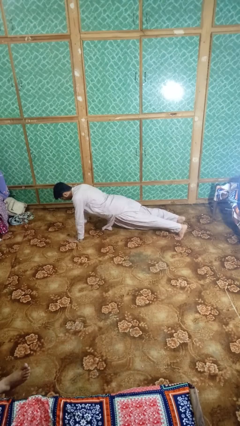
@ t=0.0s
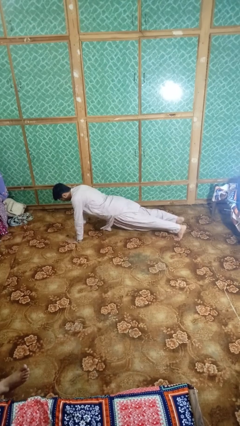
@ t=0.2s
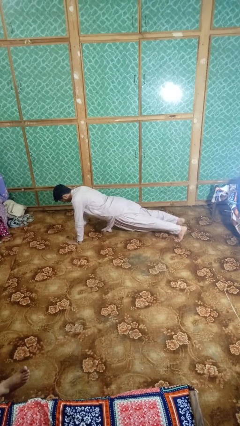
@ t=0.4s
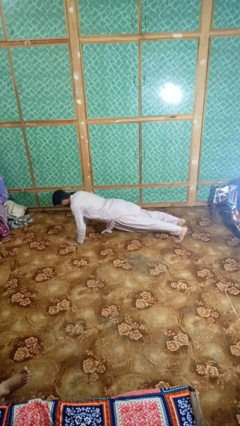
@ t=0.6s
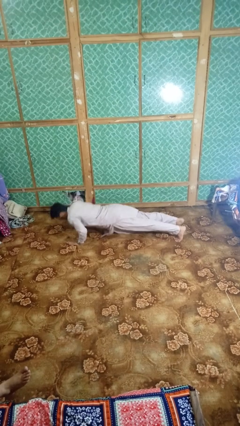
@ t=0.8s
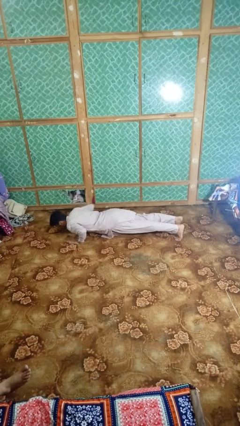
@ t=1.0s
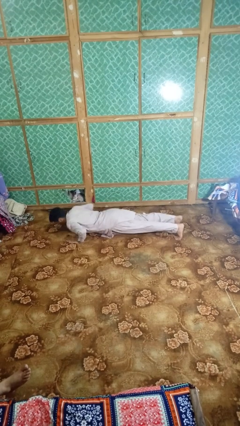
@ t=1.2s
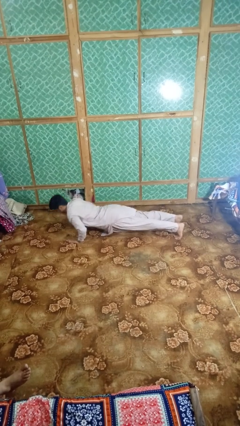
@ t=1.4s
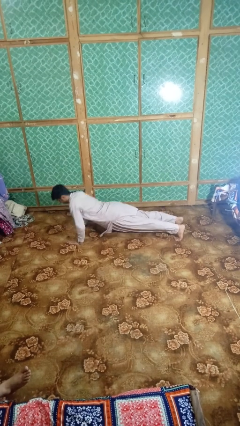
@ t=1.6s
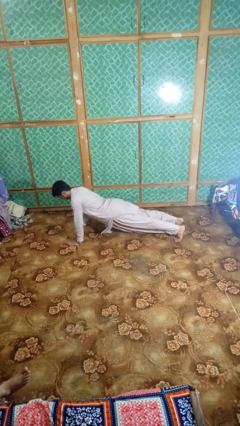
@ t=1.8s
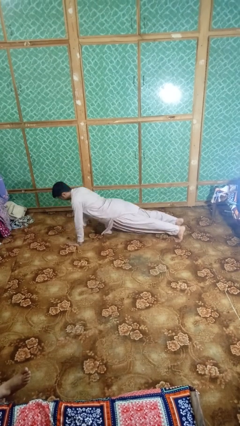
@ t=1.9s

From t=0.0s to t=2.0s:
person exercises with pushup

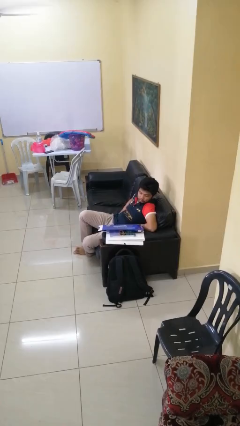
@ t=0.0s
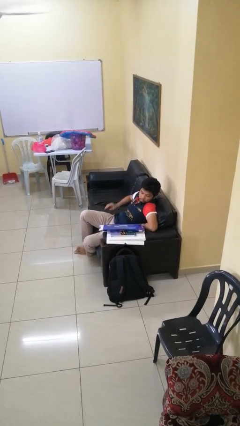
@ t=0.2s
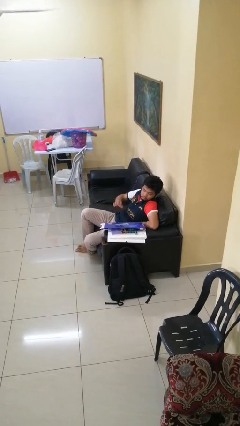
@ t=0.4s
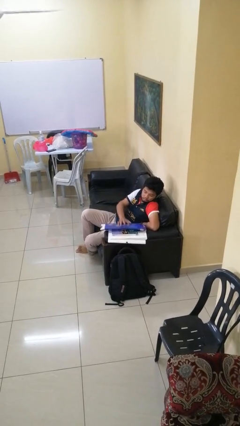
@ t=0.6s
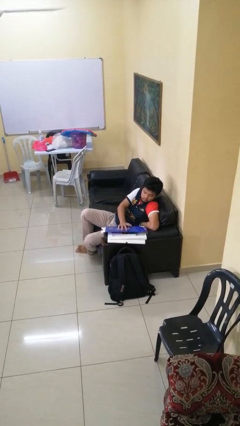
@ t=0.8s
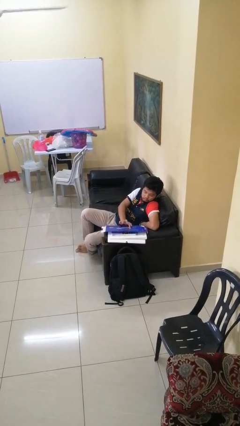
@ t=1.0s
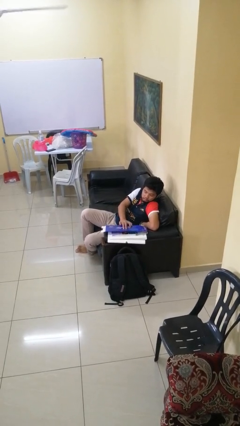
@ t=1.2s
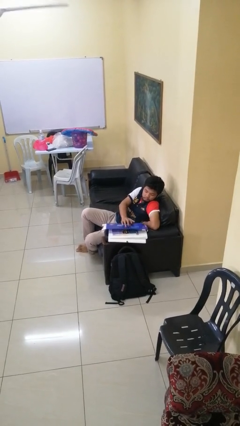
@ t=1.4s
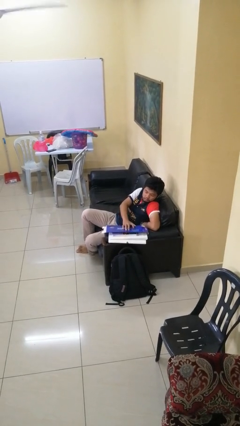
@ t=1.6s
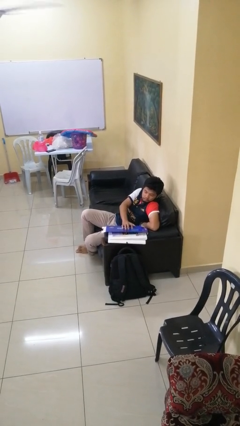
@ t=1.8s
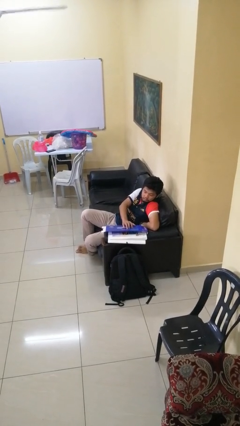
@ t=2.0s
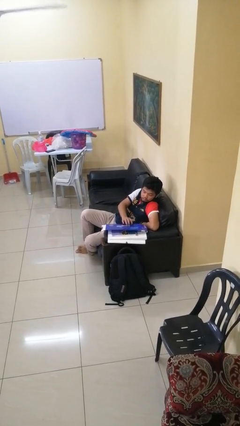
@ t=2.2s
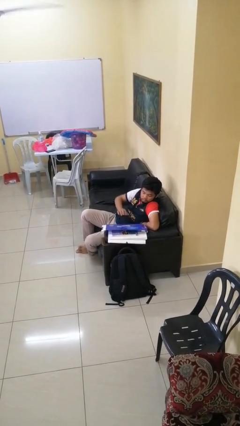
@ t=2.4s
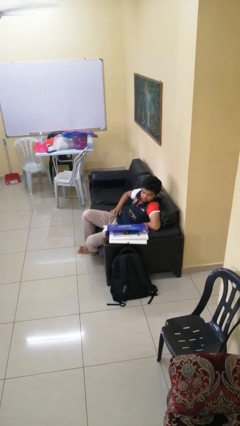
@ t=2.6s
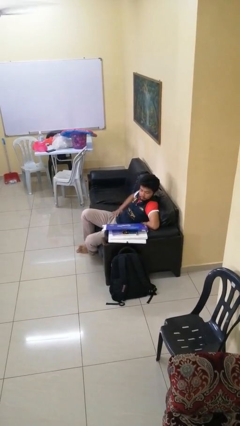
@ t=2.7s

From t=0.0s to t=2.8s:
person taps object with finger

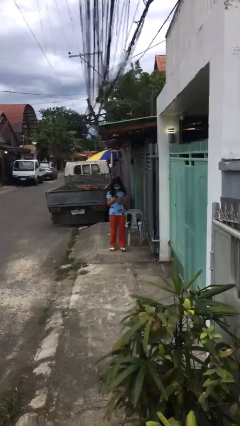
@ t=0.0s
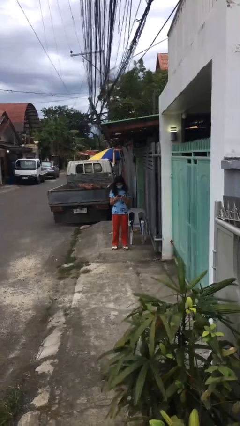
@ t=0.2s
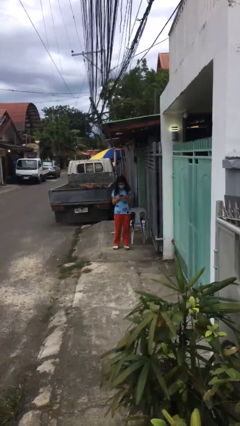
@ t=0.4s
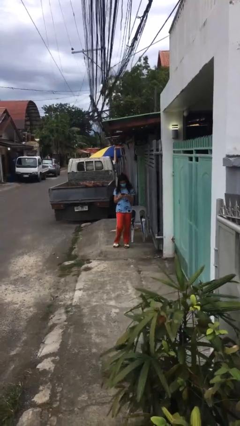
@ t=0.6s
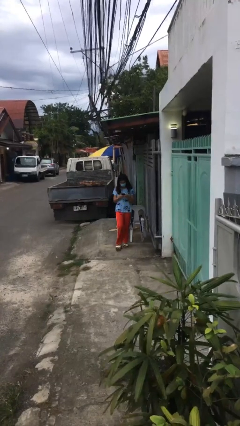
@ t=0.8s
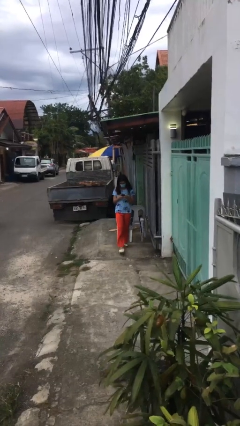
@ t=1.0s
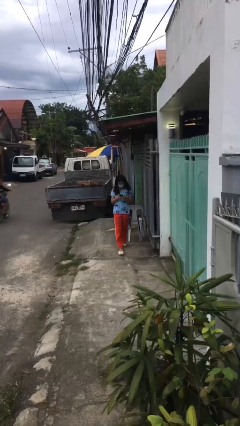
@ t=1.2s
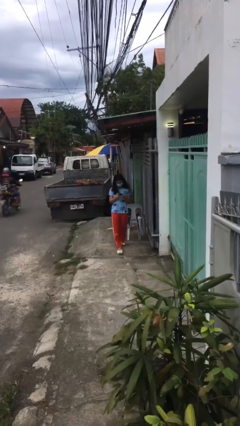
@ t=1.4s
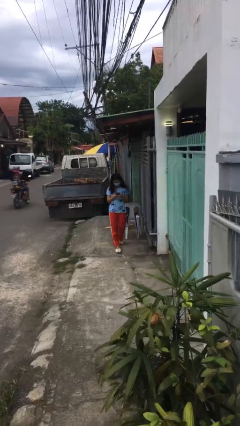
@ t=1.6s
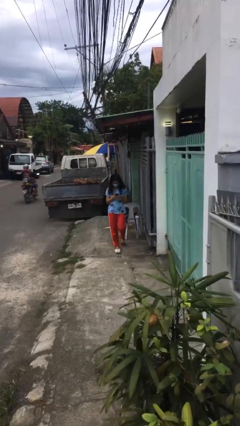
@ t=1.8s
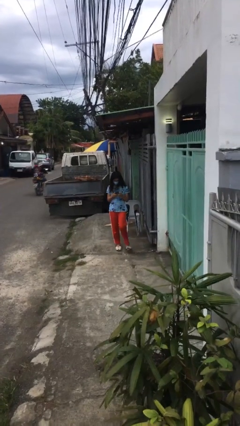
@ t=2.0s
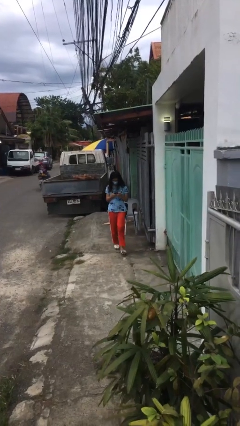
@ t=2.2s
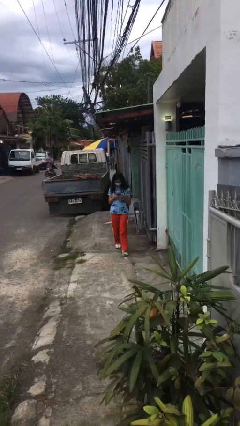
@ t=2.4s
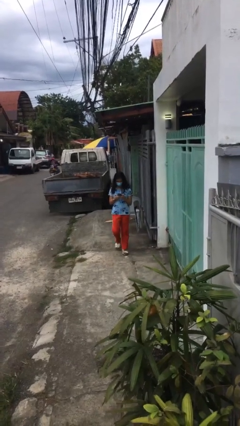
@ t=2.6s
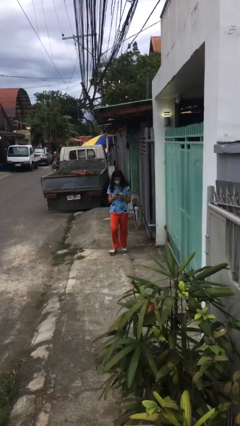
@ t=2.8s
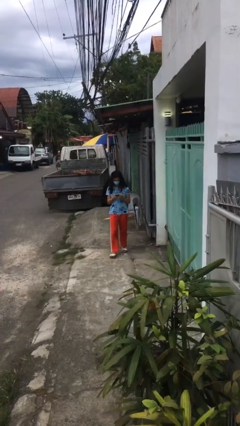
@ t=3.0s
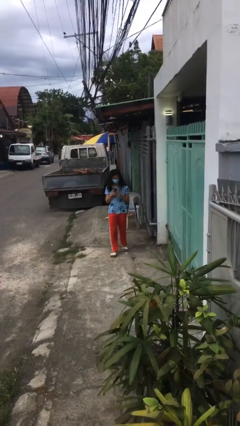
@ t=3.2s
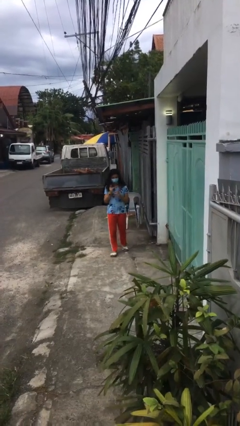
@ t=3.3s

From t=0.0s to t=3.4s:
person texts on phone

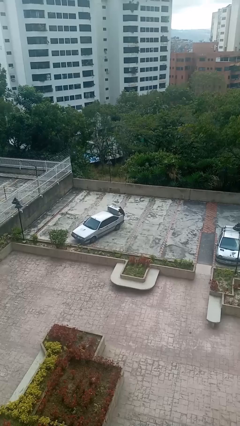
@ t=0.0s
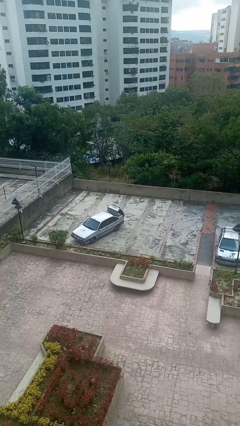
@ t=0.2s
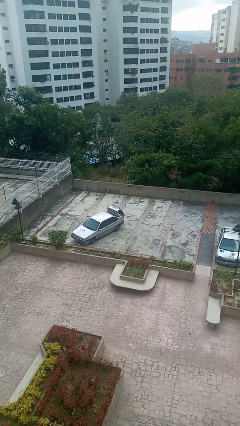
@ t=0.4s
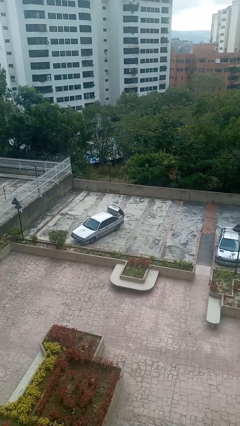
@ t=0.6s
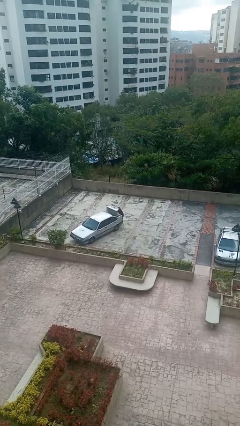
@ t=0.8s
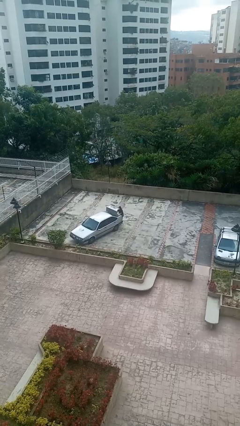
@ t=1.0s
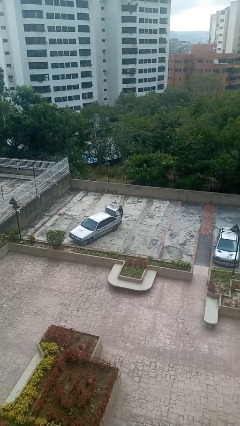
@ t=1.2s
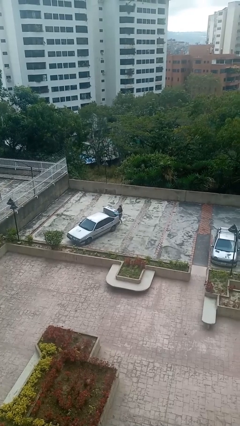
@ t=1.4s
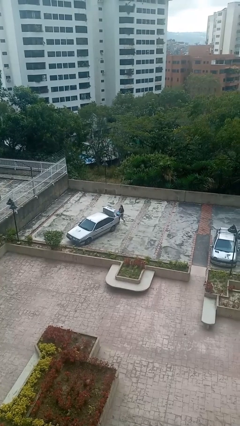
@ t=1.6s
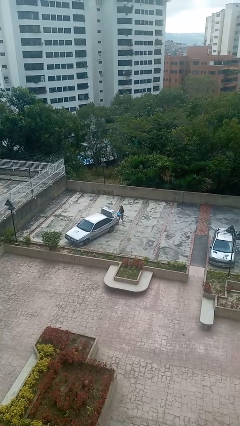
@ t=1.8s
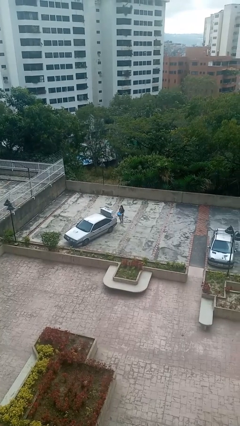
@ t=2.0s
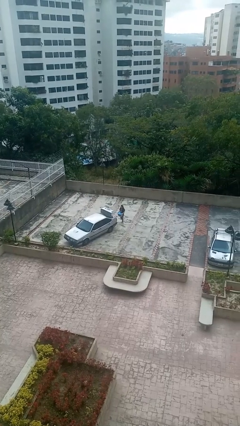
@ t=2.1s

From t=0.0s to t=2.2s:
person unloads car

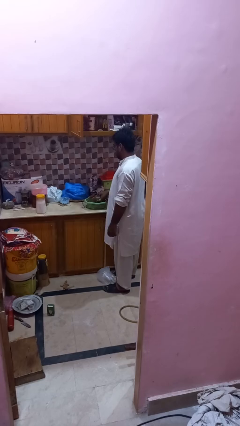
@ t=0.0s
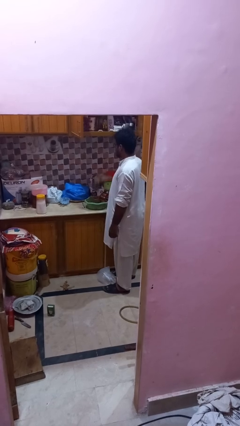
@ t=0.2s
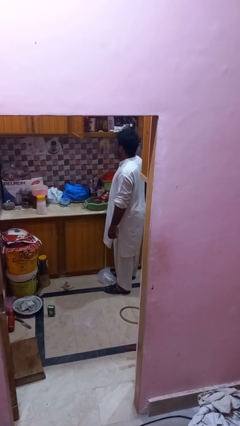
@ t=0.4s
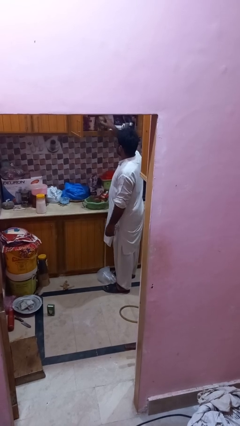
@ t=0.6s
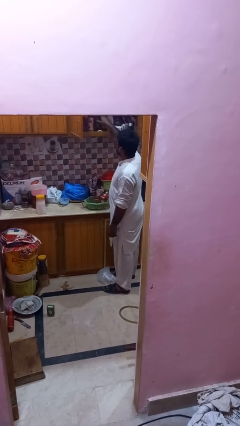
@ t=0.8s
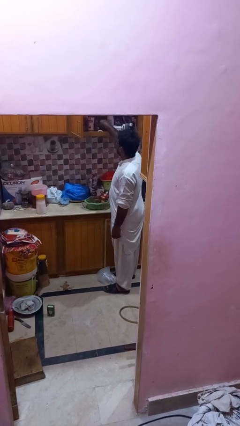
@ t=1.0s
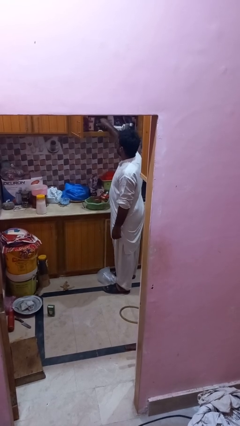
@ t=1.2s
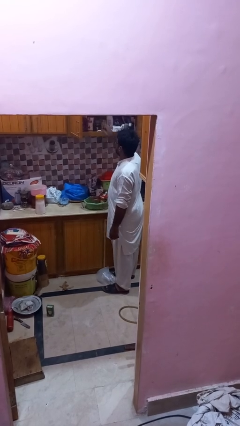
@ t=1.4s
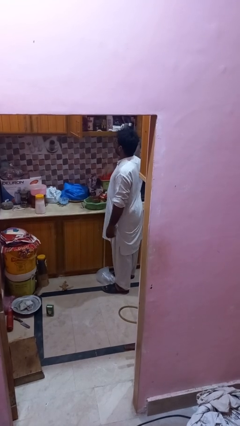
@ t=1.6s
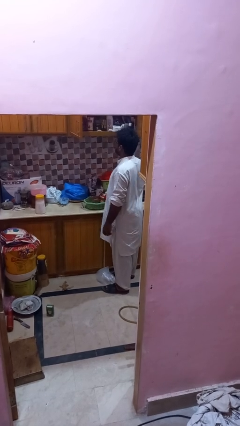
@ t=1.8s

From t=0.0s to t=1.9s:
person loads groceries into cabinet
